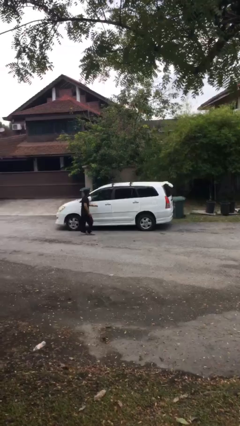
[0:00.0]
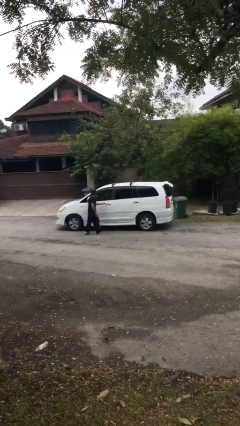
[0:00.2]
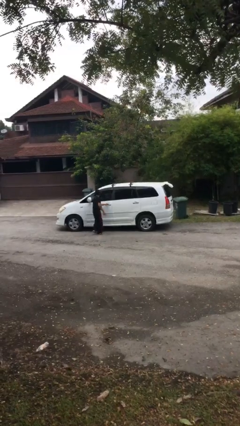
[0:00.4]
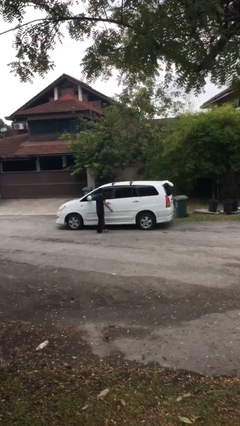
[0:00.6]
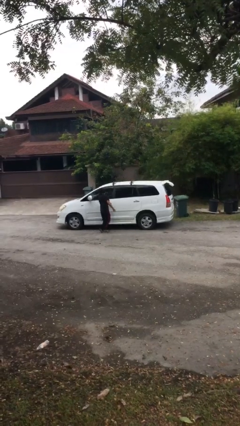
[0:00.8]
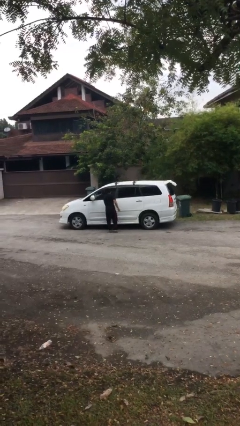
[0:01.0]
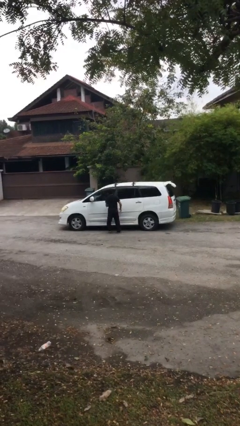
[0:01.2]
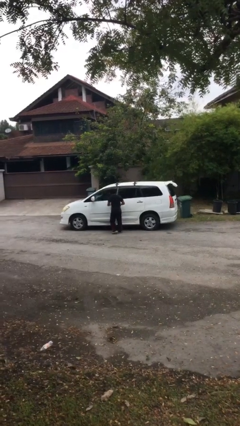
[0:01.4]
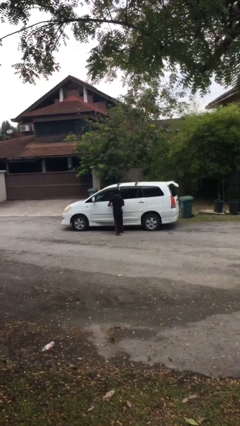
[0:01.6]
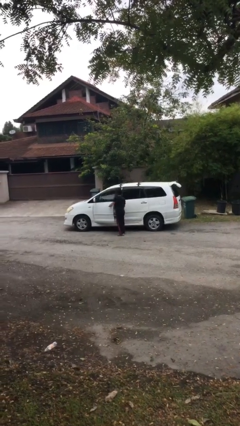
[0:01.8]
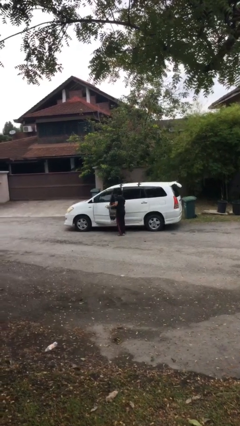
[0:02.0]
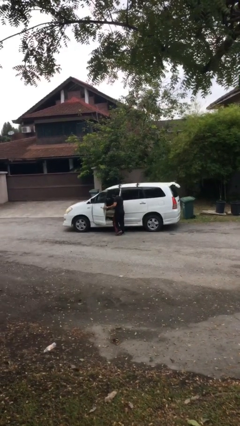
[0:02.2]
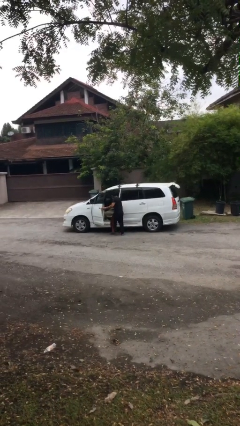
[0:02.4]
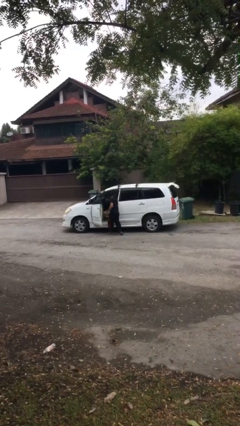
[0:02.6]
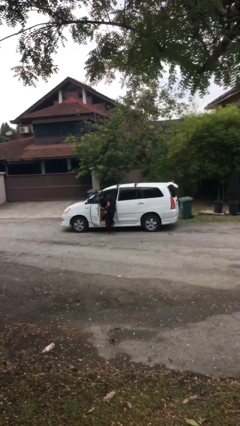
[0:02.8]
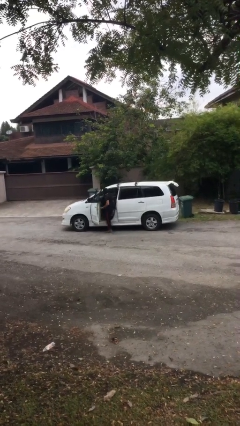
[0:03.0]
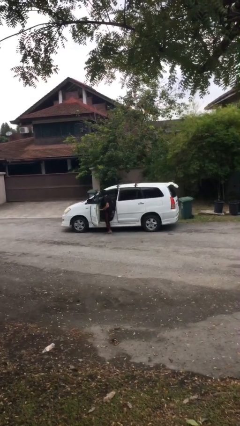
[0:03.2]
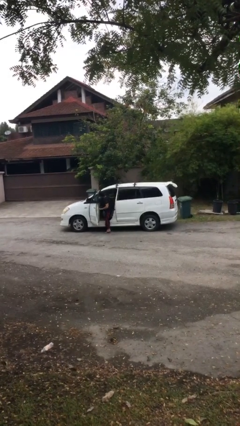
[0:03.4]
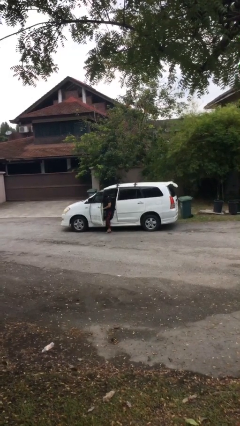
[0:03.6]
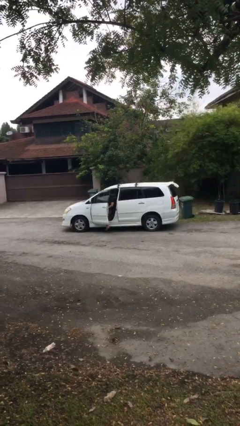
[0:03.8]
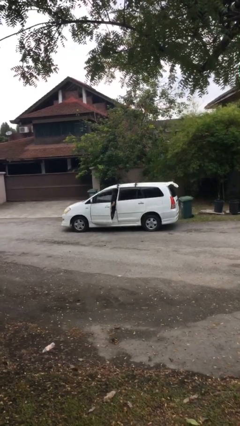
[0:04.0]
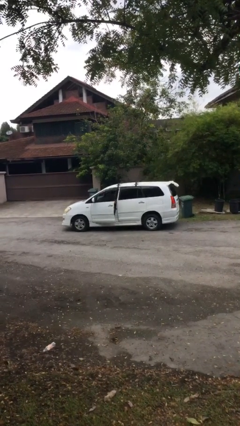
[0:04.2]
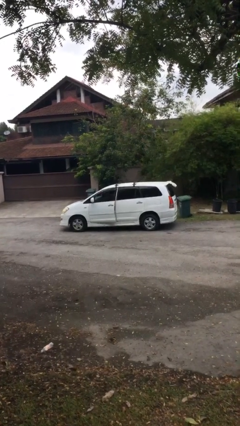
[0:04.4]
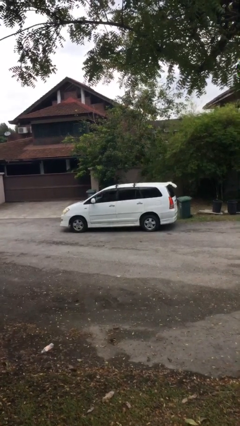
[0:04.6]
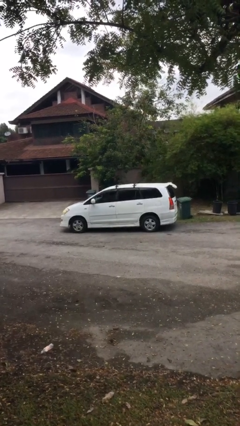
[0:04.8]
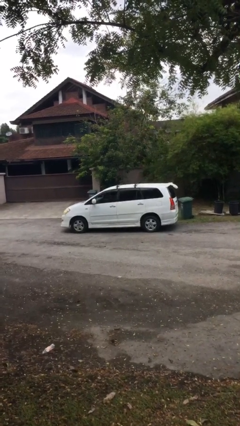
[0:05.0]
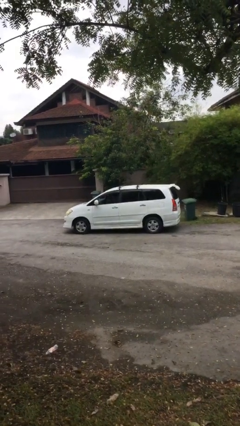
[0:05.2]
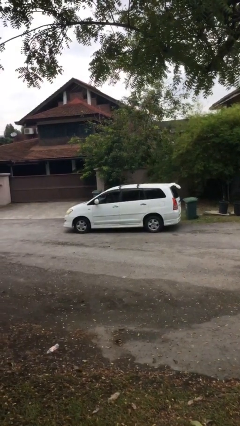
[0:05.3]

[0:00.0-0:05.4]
car picks up person

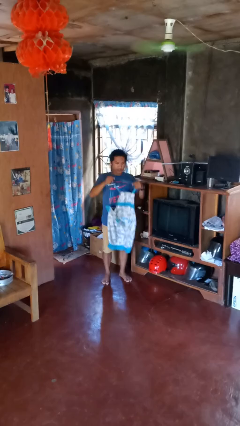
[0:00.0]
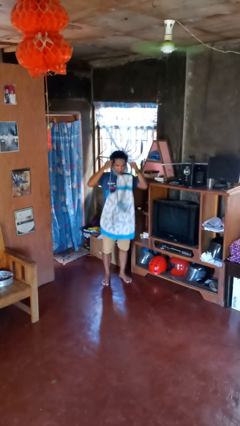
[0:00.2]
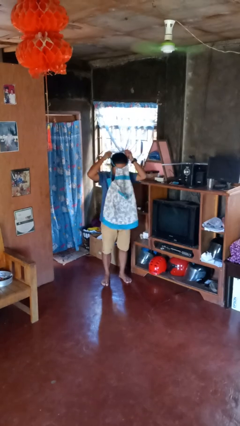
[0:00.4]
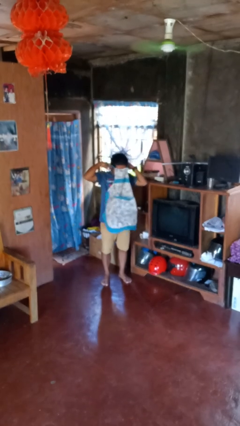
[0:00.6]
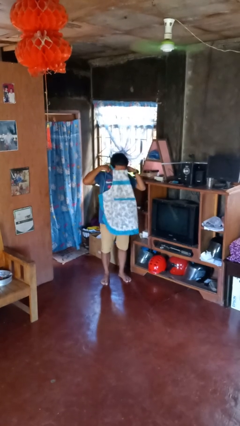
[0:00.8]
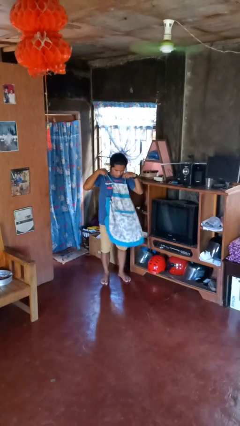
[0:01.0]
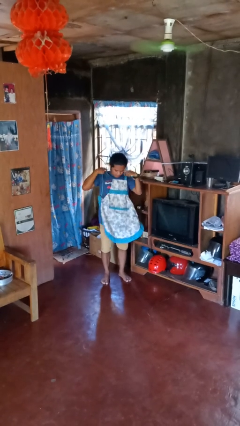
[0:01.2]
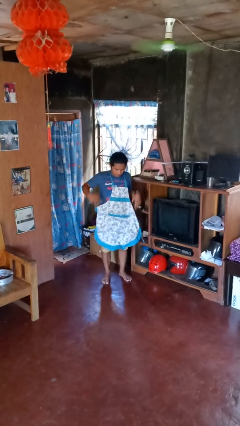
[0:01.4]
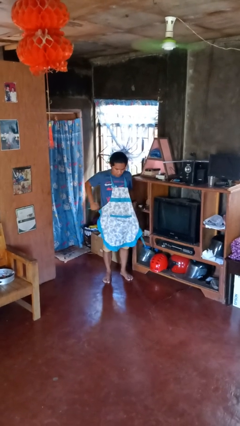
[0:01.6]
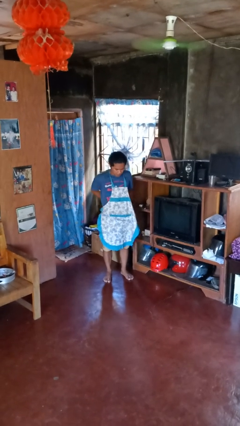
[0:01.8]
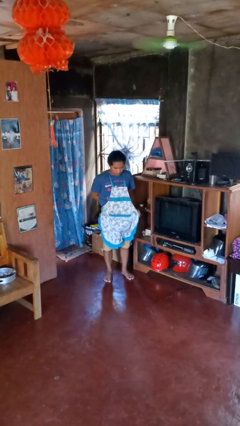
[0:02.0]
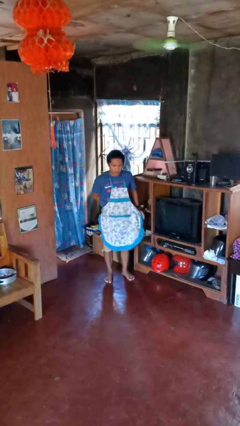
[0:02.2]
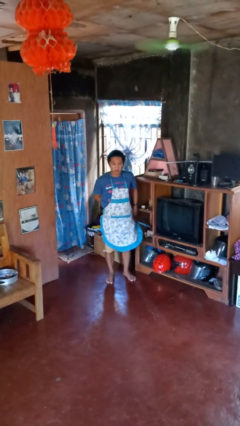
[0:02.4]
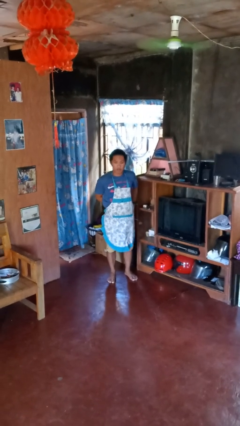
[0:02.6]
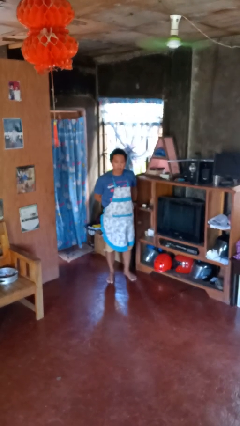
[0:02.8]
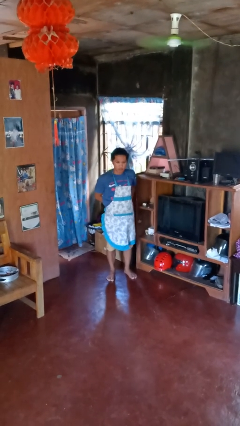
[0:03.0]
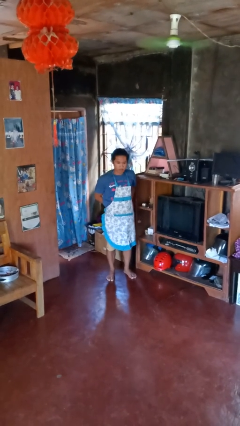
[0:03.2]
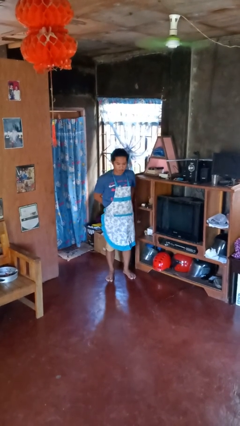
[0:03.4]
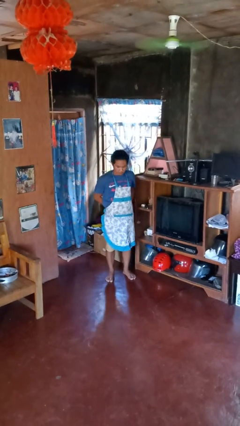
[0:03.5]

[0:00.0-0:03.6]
person puts on apron

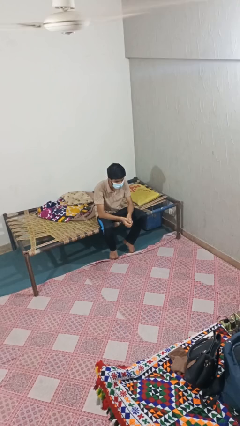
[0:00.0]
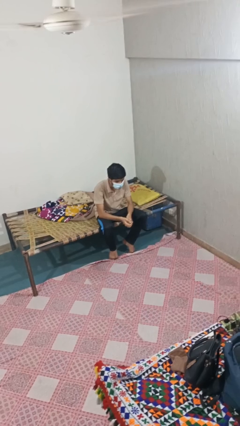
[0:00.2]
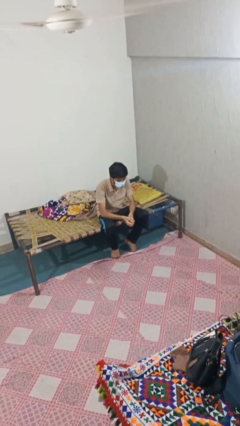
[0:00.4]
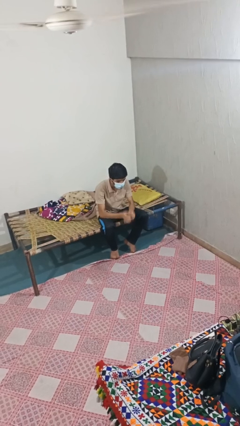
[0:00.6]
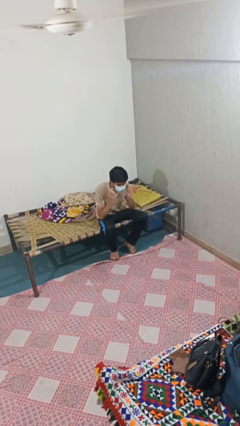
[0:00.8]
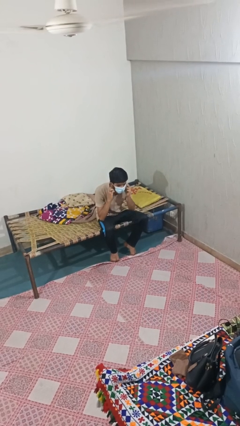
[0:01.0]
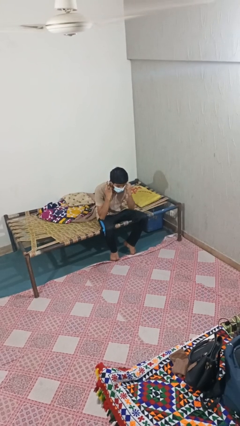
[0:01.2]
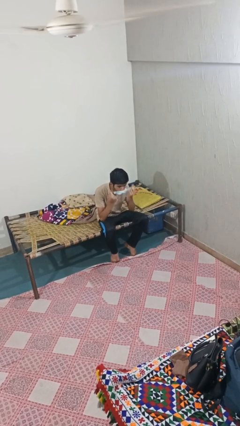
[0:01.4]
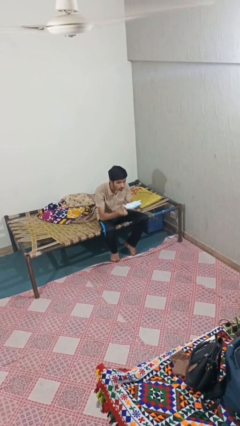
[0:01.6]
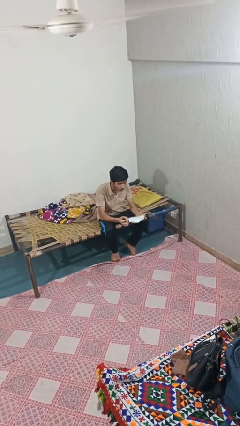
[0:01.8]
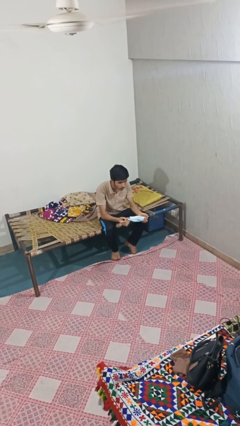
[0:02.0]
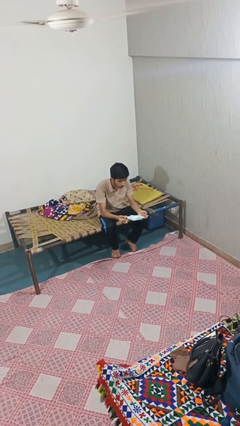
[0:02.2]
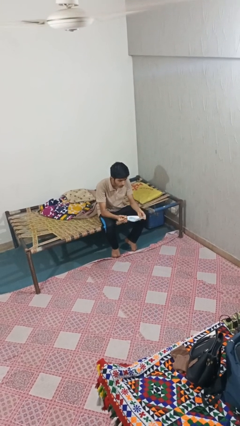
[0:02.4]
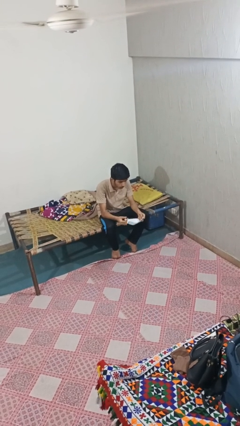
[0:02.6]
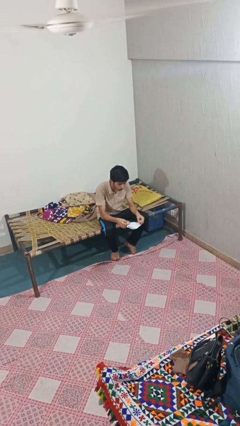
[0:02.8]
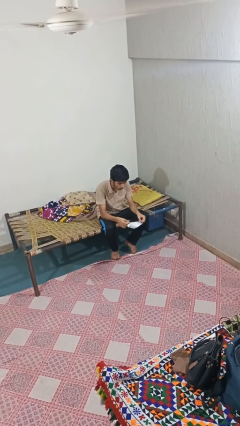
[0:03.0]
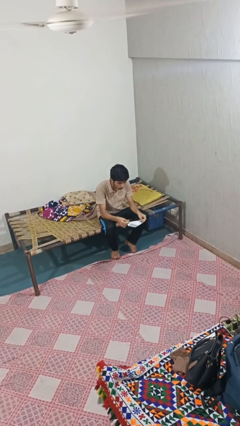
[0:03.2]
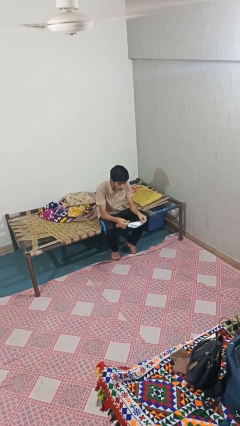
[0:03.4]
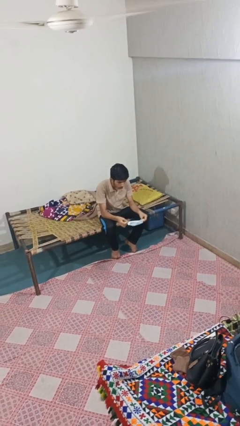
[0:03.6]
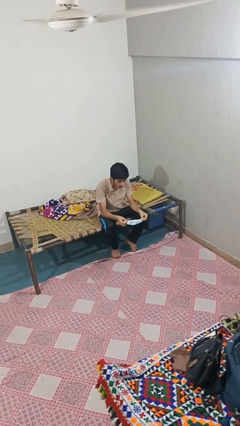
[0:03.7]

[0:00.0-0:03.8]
person takes off facemask

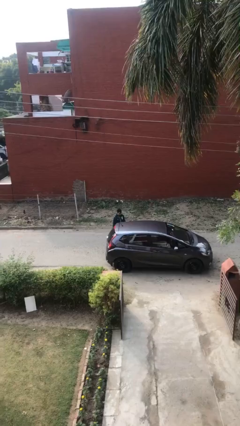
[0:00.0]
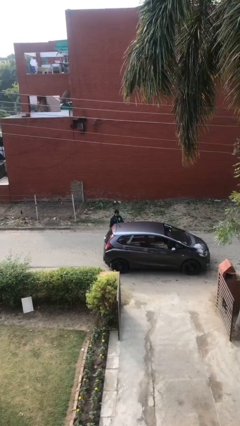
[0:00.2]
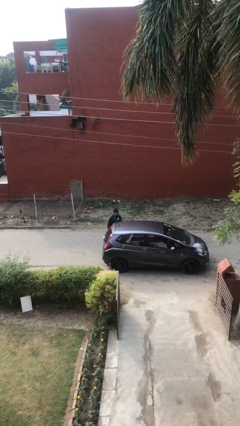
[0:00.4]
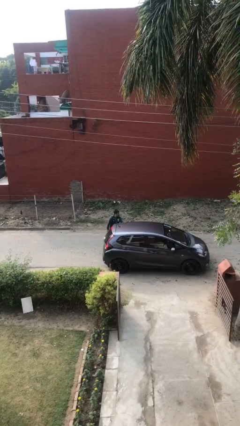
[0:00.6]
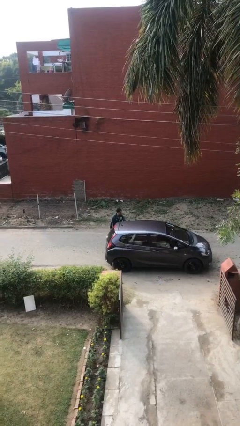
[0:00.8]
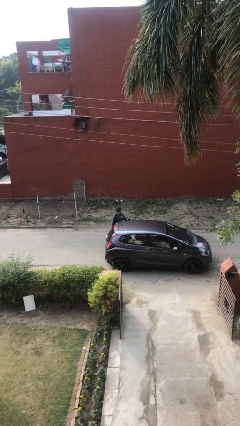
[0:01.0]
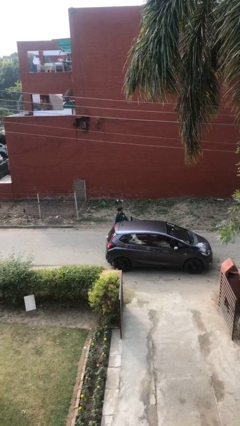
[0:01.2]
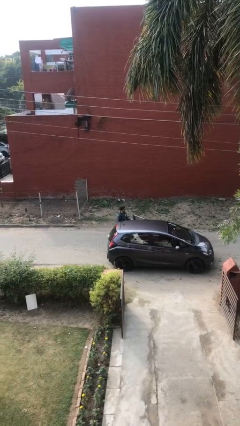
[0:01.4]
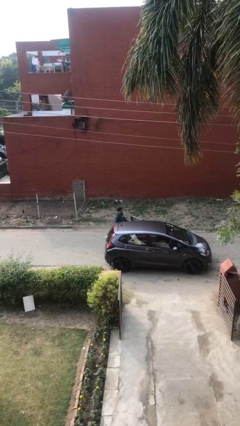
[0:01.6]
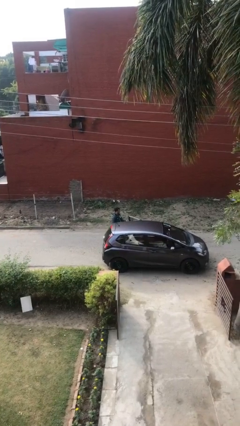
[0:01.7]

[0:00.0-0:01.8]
person opens car door

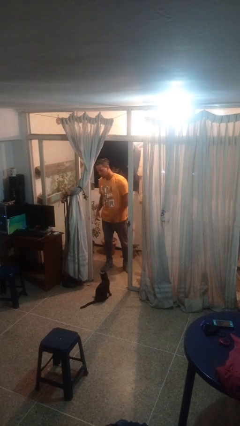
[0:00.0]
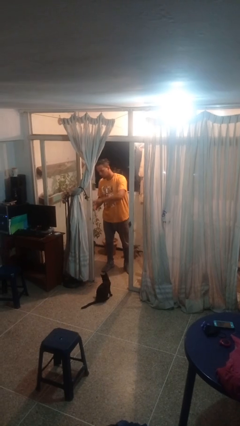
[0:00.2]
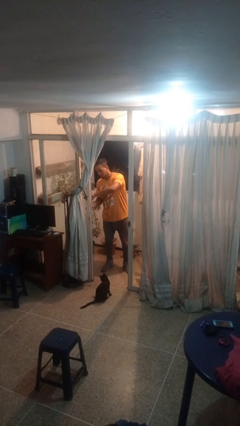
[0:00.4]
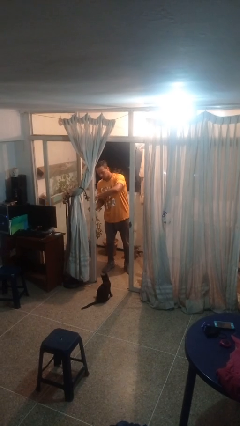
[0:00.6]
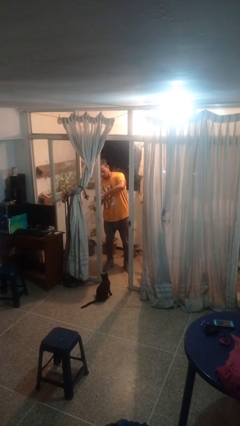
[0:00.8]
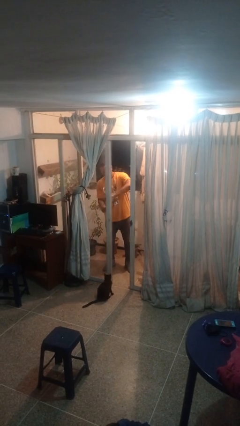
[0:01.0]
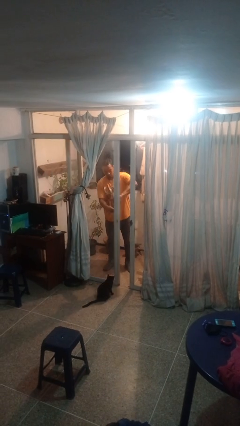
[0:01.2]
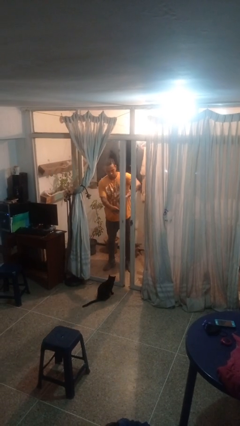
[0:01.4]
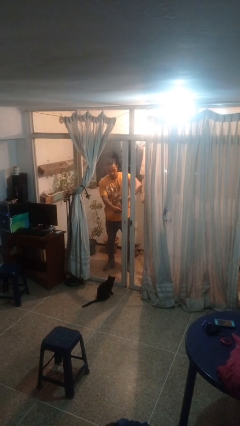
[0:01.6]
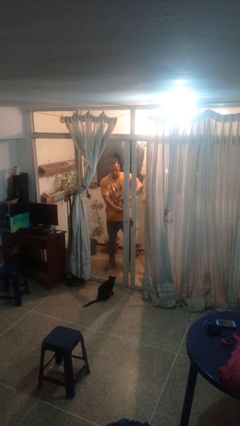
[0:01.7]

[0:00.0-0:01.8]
person closes sliding door

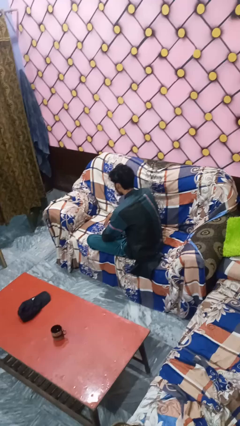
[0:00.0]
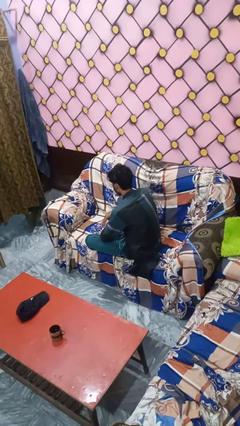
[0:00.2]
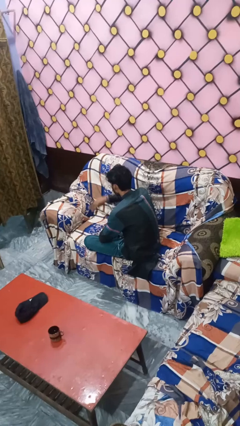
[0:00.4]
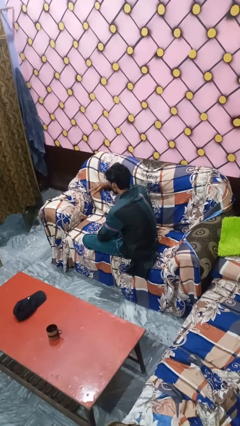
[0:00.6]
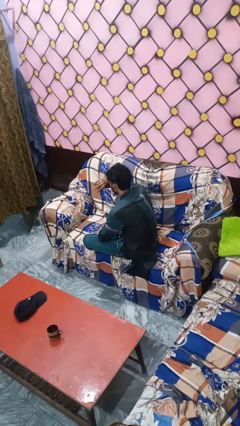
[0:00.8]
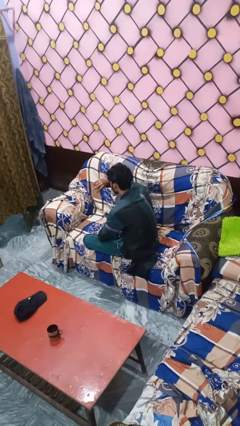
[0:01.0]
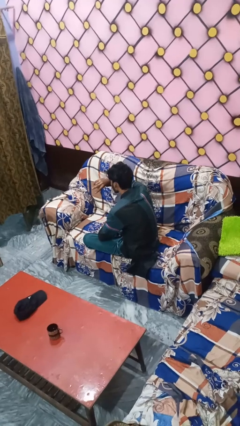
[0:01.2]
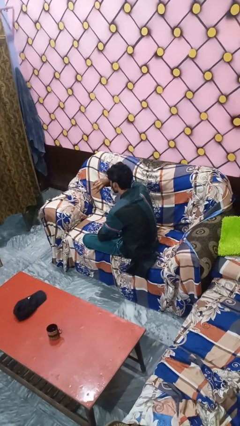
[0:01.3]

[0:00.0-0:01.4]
person gestures watch closely
